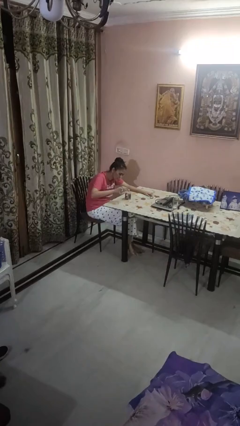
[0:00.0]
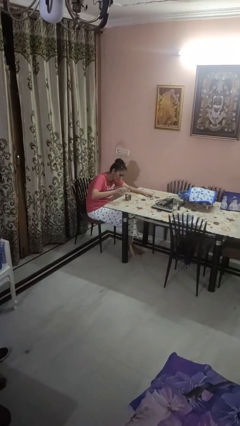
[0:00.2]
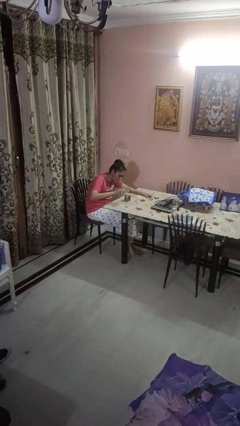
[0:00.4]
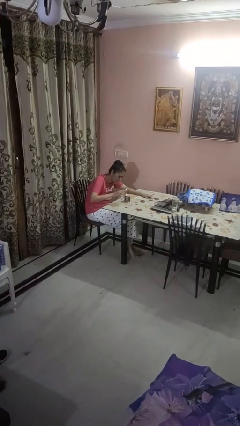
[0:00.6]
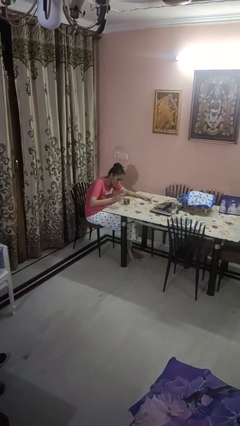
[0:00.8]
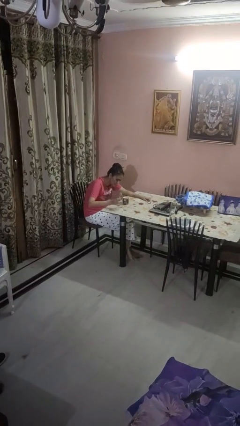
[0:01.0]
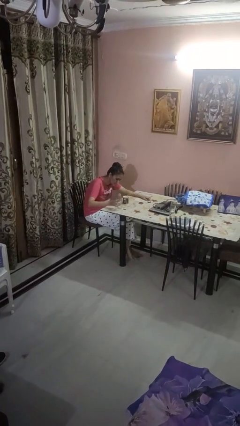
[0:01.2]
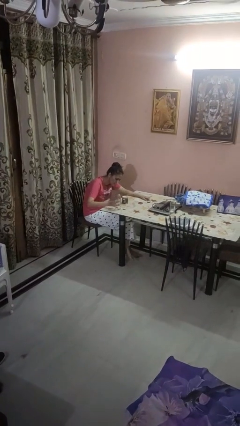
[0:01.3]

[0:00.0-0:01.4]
person pours liquid into cup

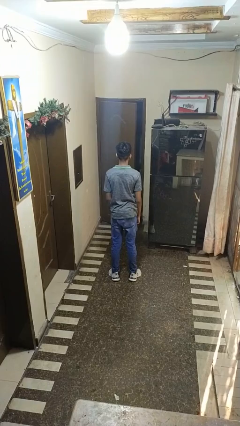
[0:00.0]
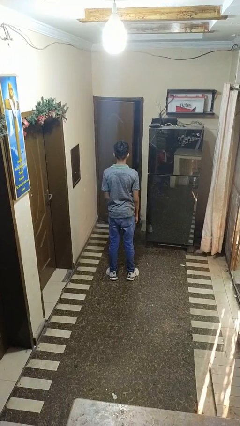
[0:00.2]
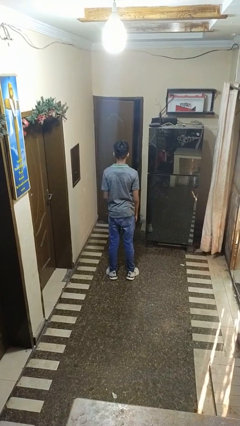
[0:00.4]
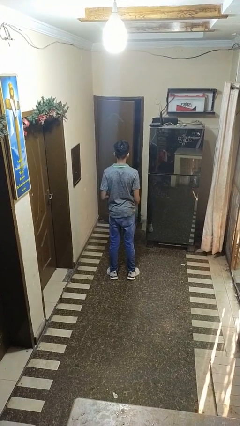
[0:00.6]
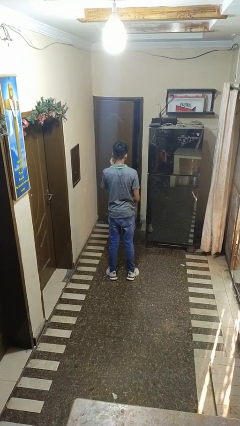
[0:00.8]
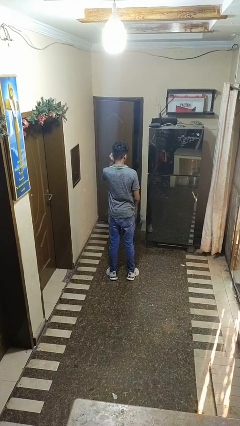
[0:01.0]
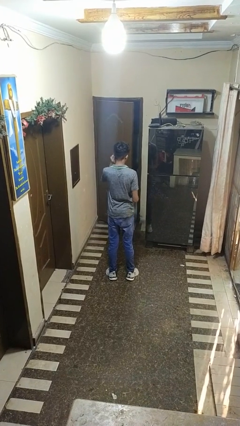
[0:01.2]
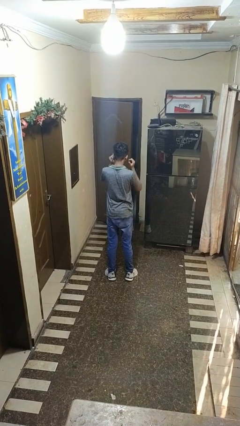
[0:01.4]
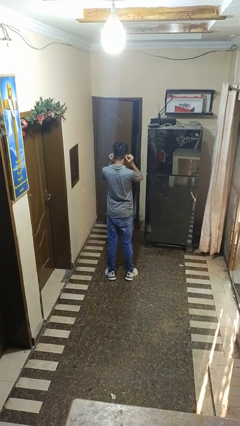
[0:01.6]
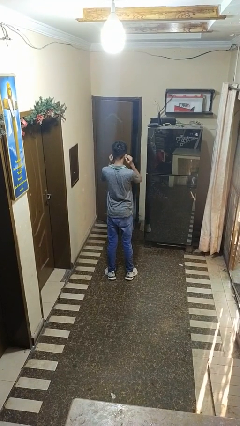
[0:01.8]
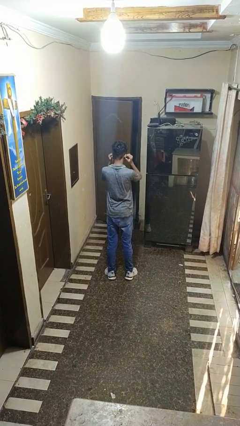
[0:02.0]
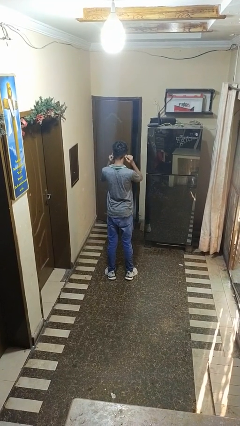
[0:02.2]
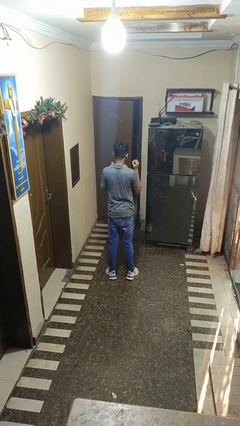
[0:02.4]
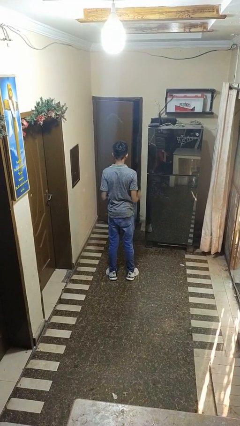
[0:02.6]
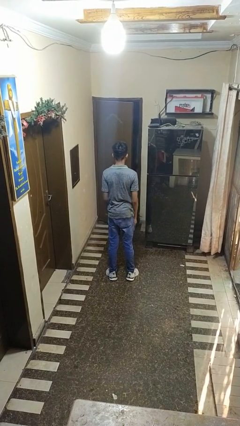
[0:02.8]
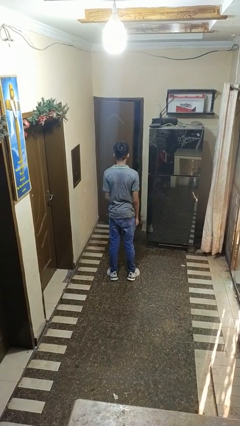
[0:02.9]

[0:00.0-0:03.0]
person touches earlobe

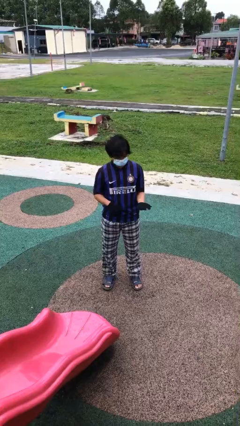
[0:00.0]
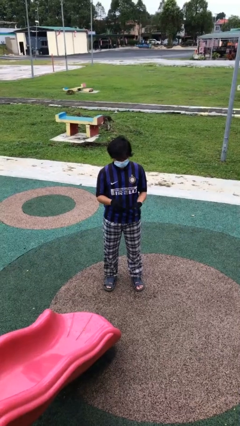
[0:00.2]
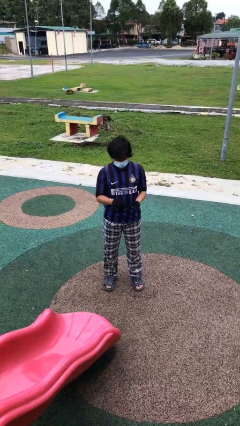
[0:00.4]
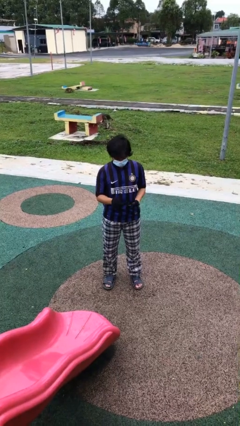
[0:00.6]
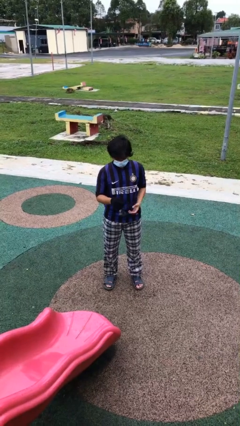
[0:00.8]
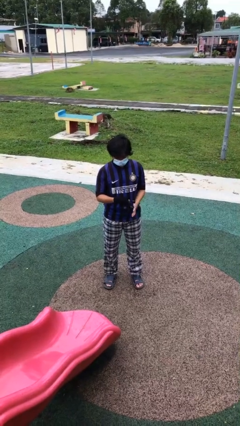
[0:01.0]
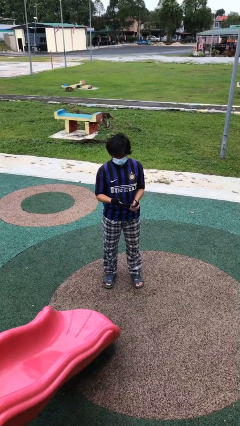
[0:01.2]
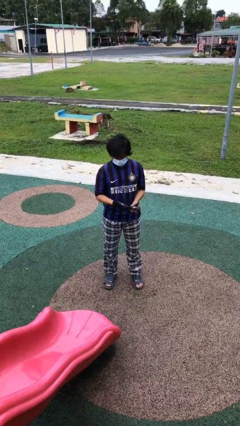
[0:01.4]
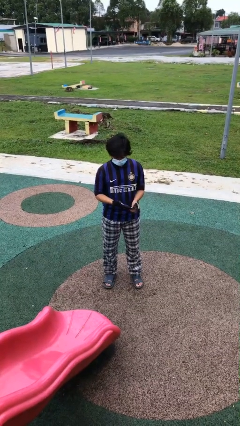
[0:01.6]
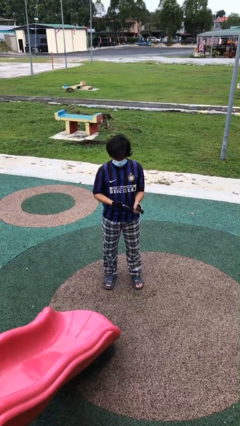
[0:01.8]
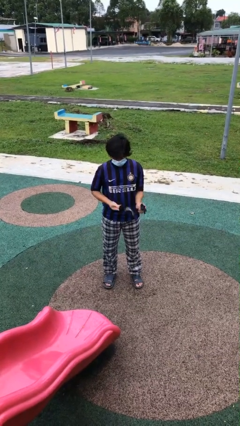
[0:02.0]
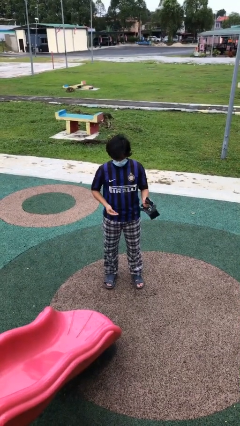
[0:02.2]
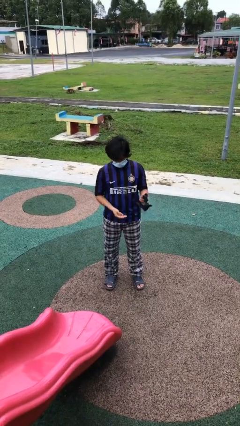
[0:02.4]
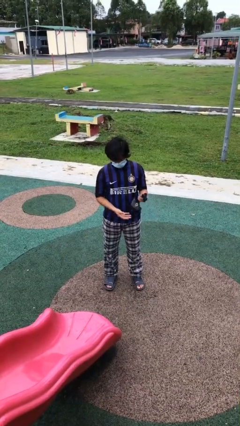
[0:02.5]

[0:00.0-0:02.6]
person takes off gloves

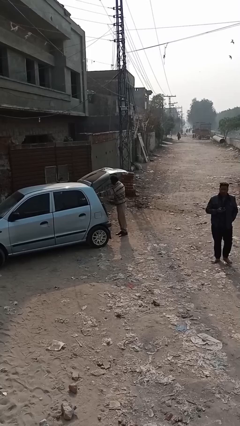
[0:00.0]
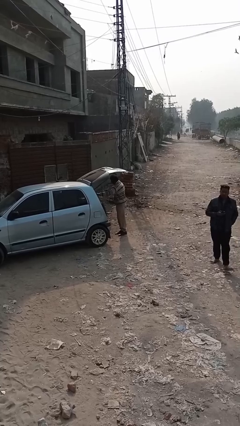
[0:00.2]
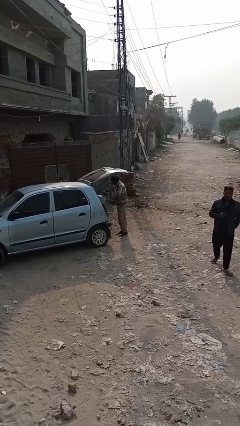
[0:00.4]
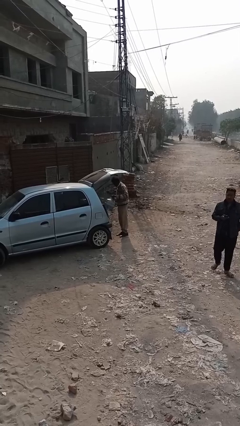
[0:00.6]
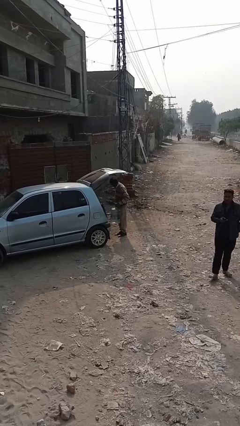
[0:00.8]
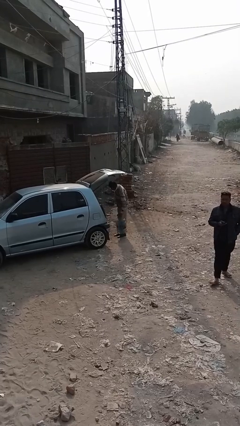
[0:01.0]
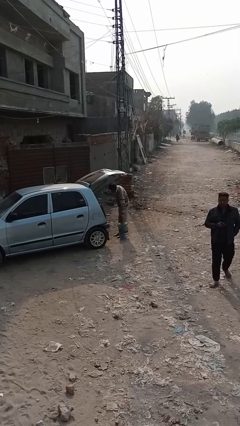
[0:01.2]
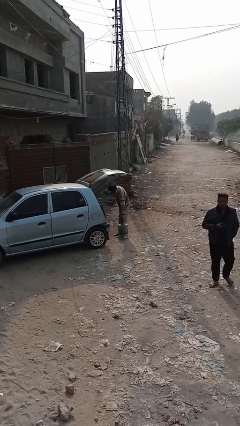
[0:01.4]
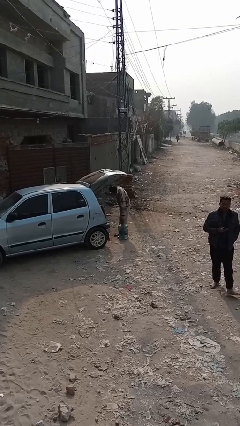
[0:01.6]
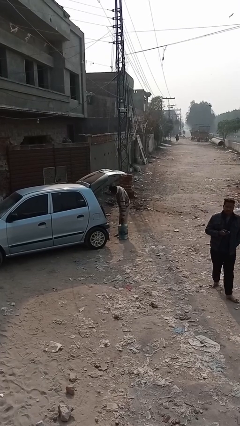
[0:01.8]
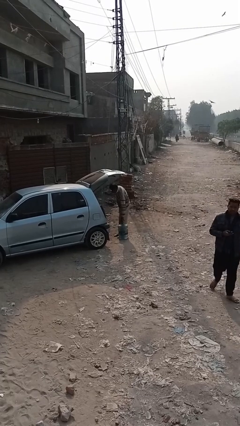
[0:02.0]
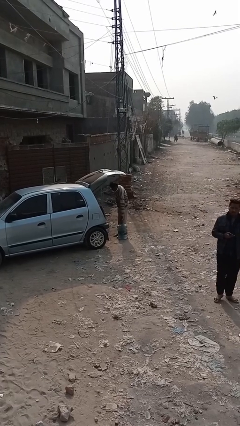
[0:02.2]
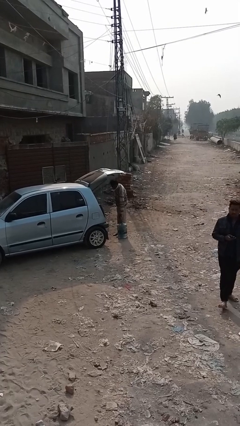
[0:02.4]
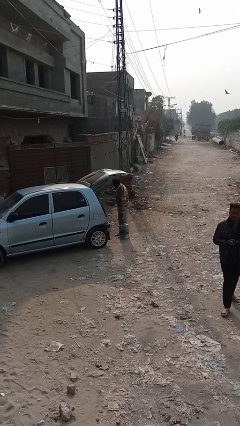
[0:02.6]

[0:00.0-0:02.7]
person unloads car

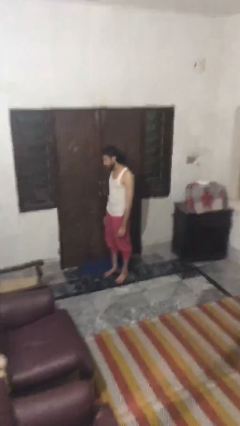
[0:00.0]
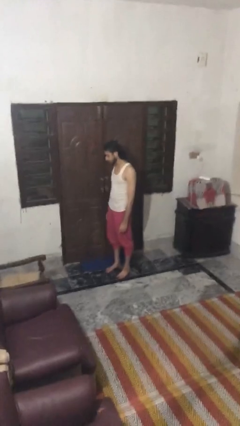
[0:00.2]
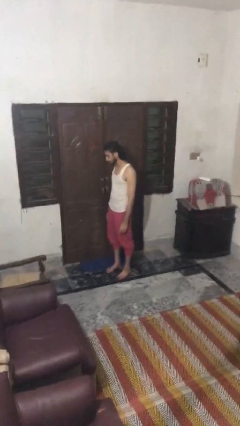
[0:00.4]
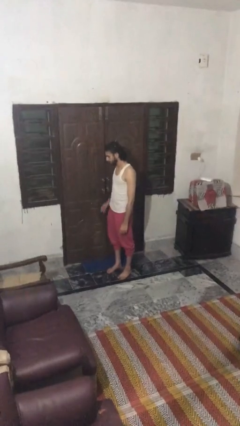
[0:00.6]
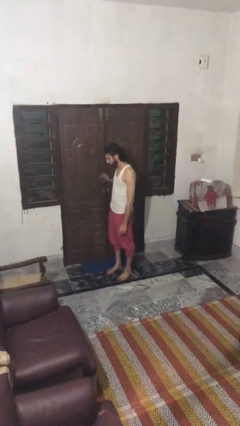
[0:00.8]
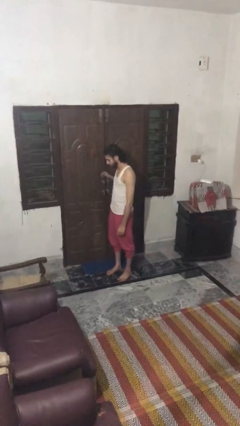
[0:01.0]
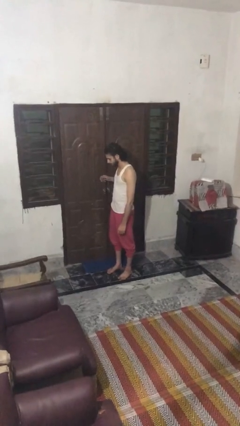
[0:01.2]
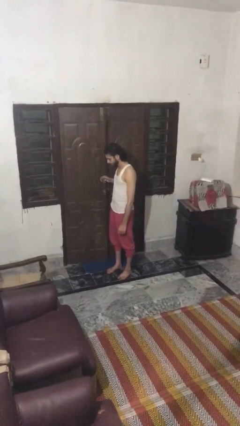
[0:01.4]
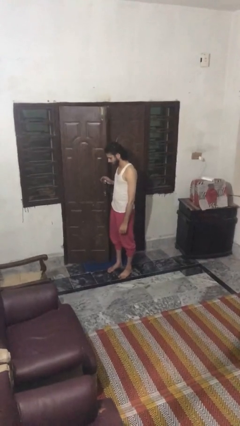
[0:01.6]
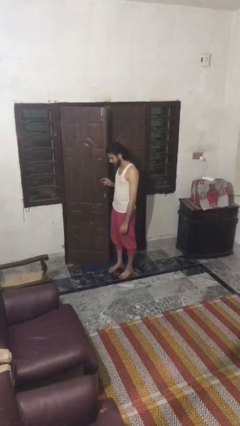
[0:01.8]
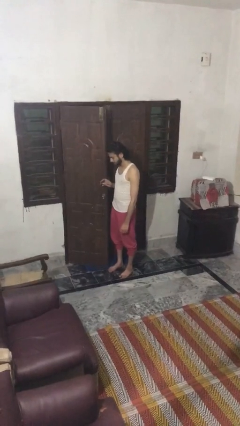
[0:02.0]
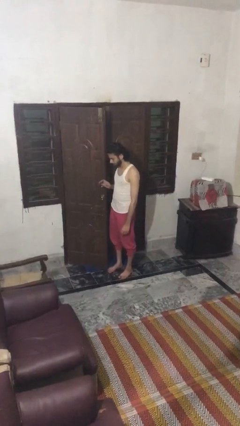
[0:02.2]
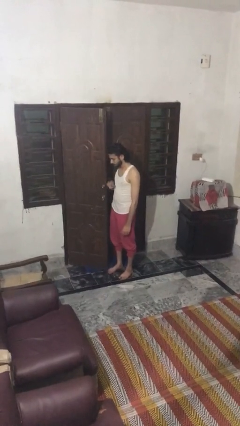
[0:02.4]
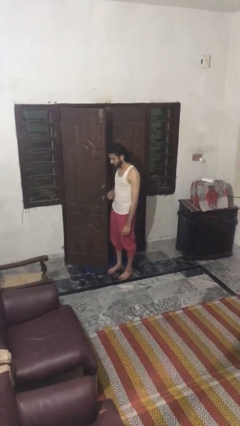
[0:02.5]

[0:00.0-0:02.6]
person opens facility door

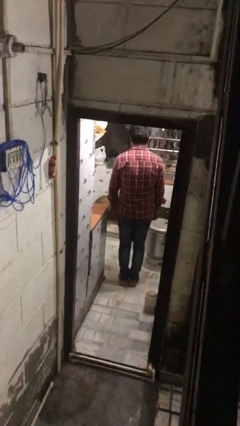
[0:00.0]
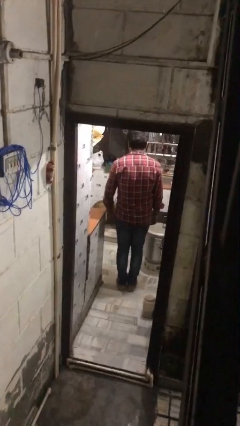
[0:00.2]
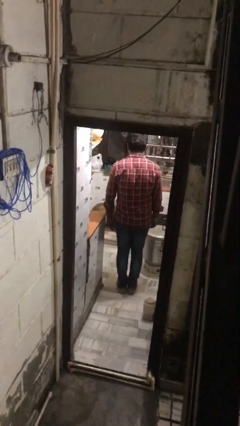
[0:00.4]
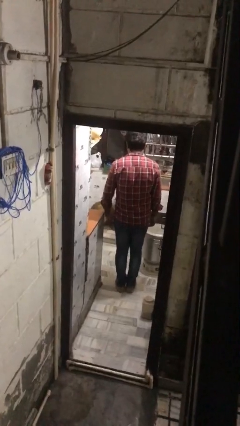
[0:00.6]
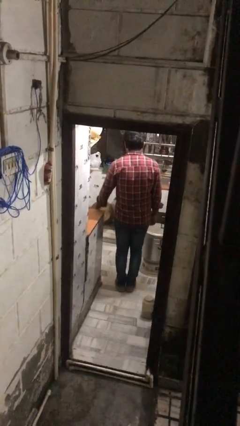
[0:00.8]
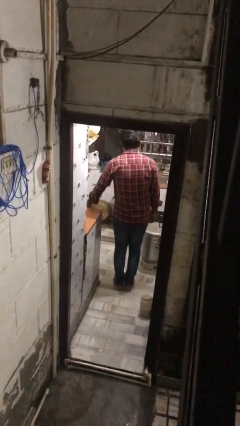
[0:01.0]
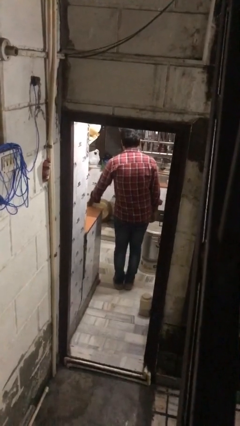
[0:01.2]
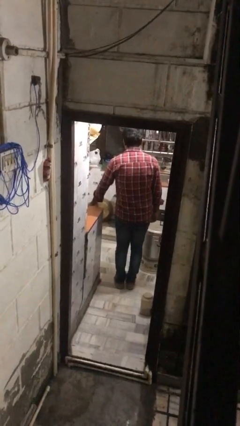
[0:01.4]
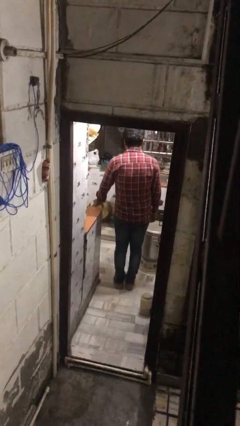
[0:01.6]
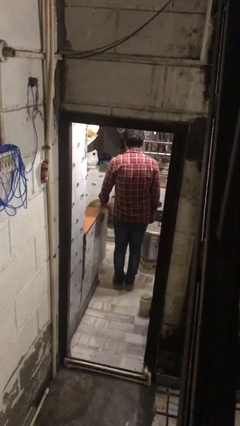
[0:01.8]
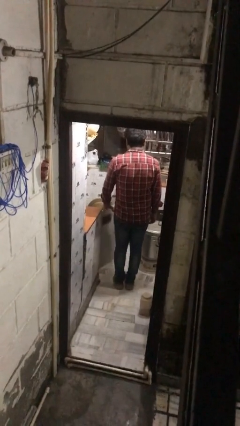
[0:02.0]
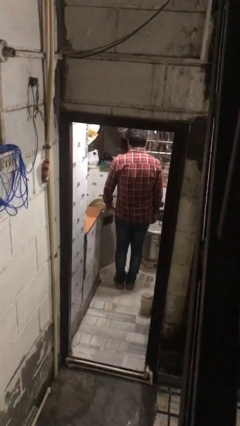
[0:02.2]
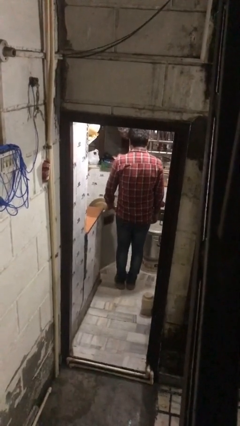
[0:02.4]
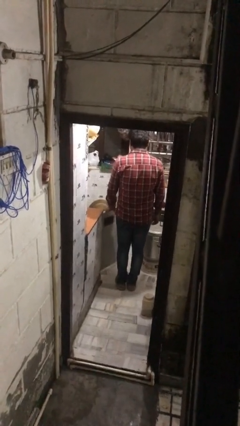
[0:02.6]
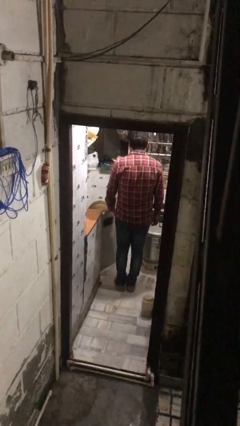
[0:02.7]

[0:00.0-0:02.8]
person opens kitchen drawer

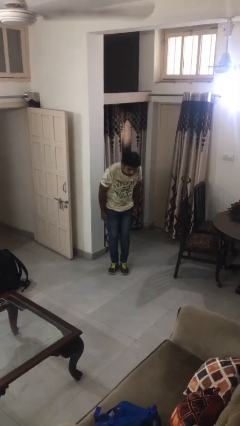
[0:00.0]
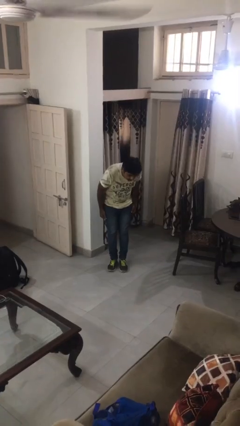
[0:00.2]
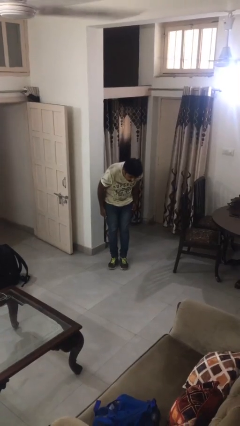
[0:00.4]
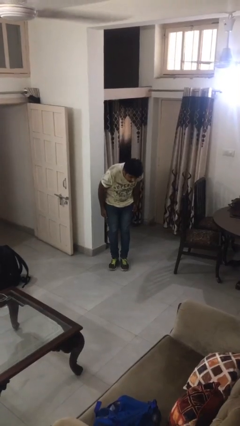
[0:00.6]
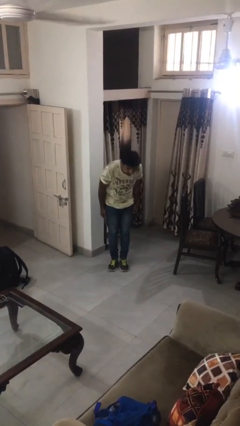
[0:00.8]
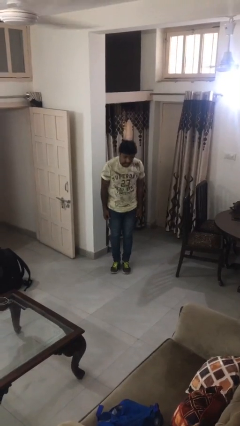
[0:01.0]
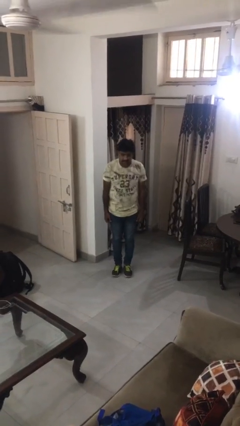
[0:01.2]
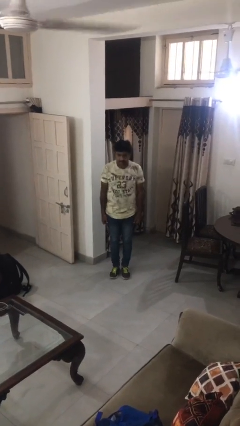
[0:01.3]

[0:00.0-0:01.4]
person bows

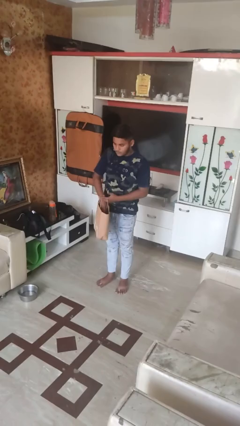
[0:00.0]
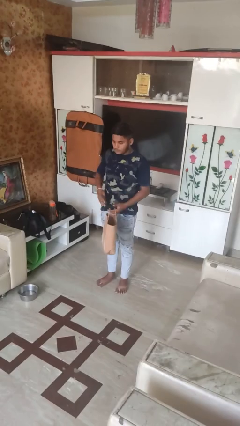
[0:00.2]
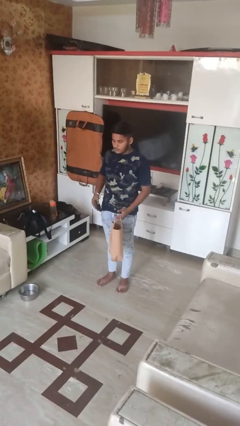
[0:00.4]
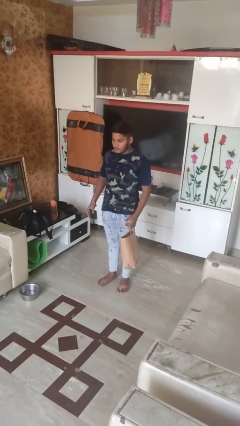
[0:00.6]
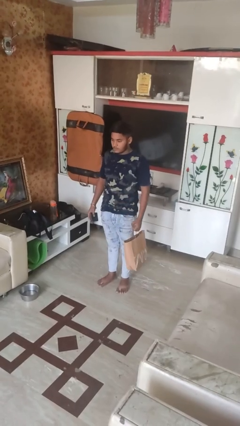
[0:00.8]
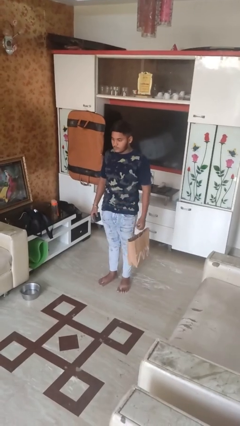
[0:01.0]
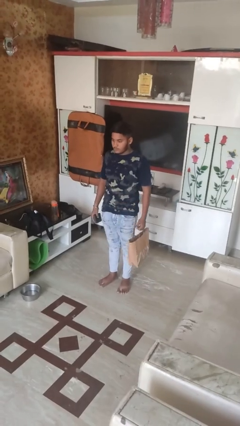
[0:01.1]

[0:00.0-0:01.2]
person takes object from bag
